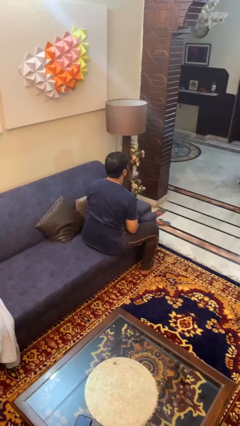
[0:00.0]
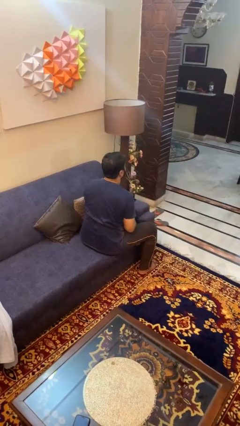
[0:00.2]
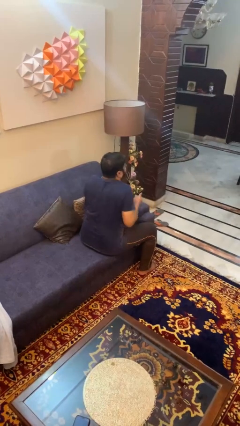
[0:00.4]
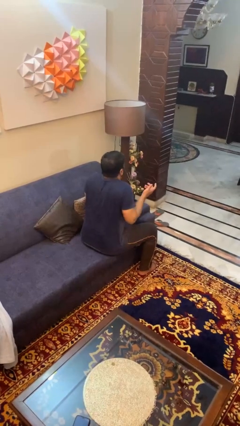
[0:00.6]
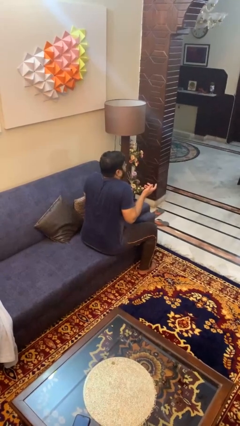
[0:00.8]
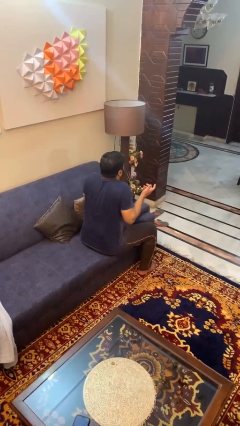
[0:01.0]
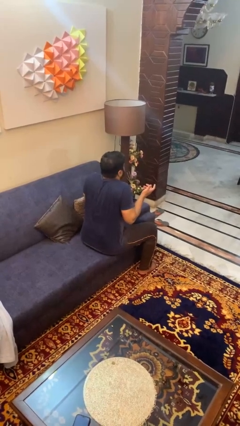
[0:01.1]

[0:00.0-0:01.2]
person shrugs

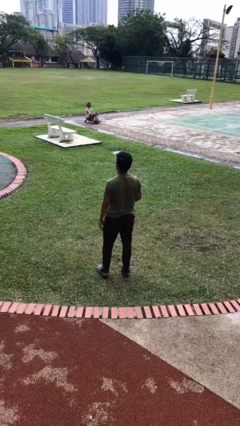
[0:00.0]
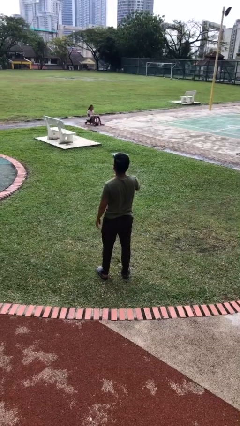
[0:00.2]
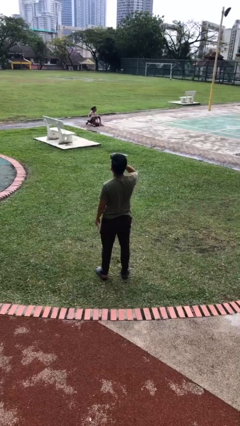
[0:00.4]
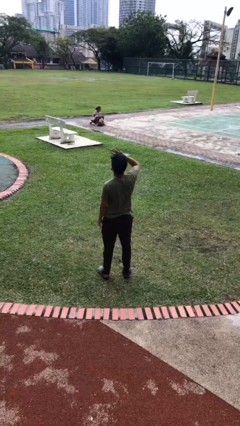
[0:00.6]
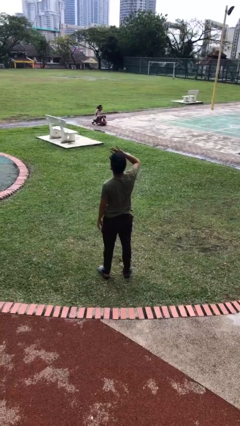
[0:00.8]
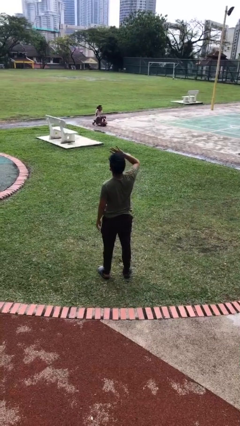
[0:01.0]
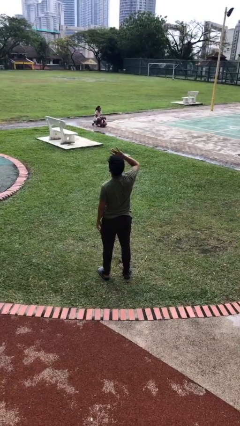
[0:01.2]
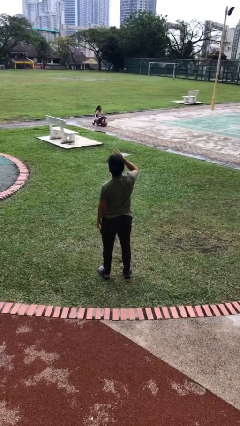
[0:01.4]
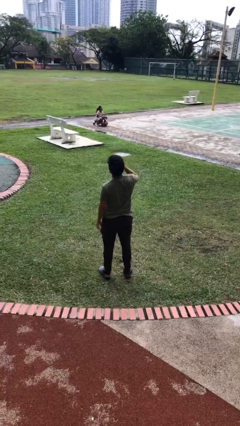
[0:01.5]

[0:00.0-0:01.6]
person shades eyes

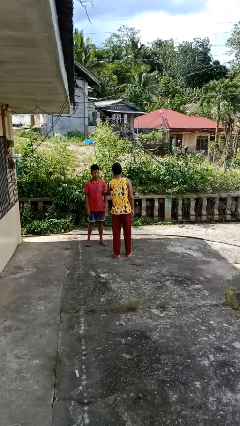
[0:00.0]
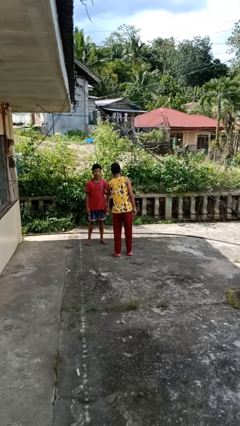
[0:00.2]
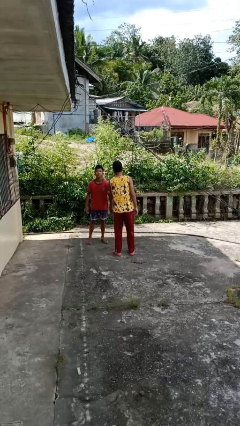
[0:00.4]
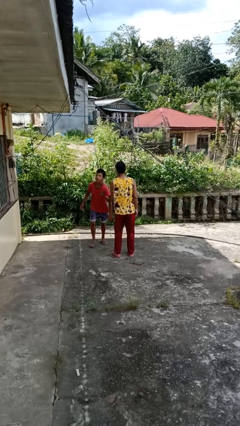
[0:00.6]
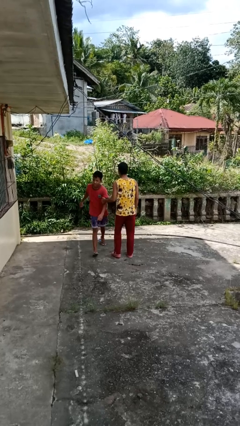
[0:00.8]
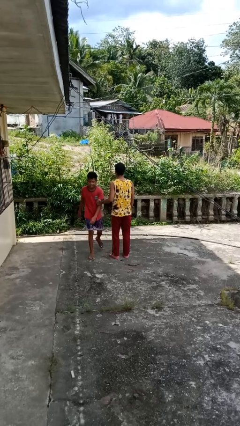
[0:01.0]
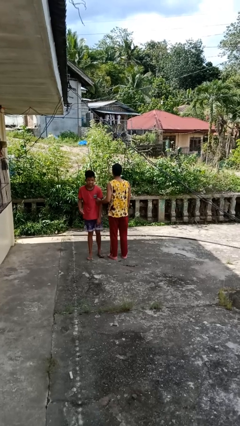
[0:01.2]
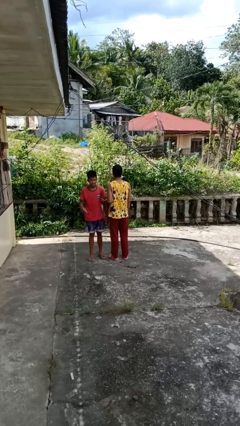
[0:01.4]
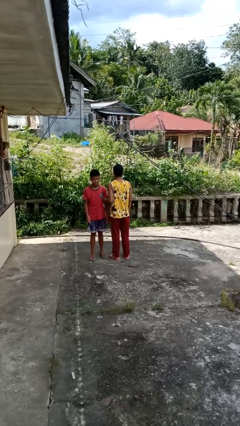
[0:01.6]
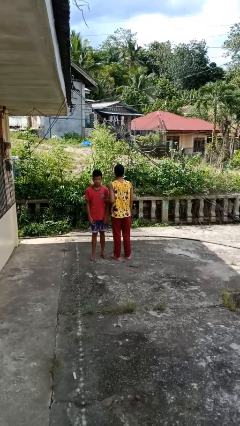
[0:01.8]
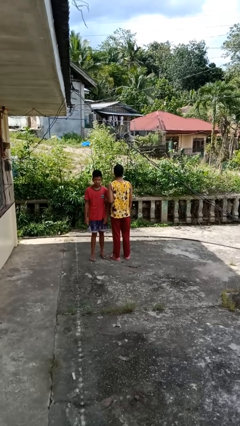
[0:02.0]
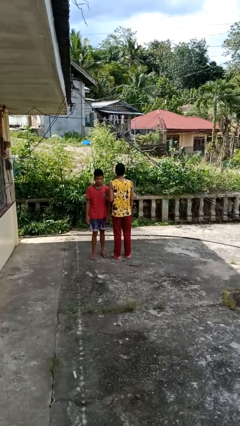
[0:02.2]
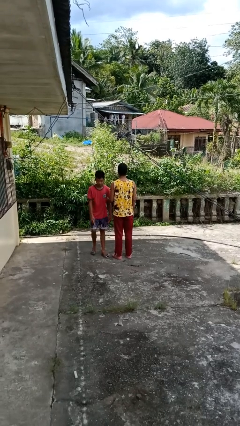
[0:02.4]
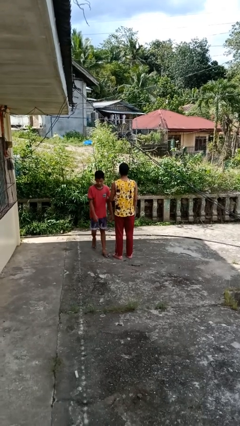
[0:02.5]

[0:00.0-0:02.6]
person grabs person by bicep

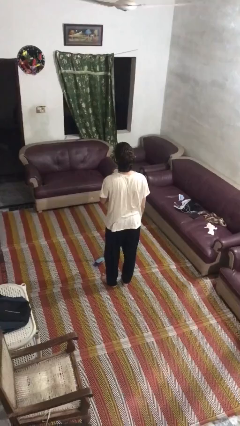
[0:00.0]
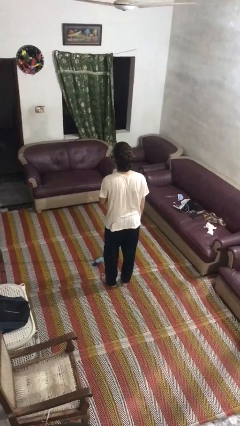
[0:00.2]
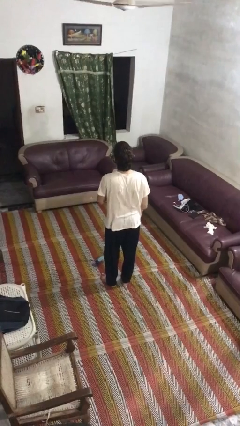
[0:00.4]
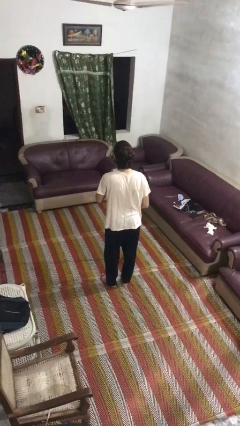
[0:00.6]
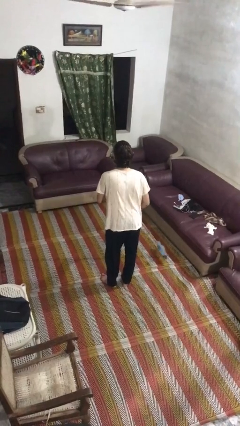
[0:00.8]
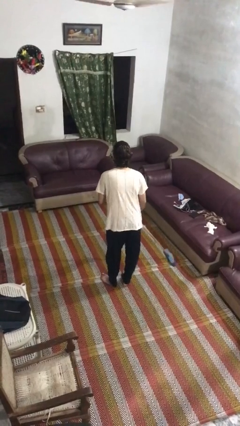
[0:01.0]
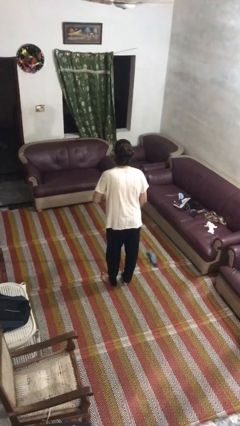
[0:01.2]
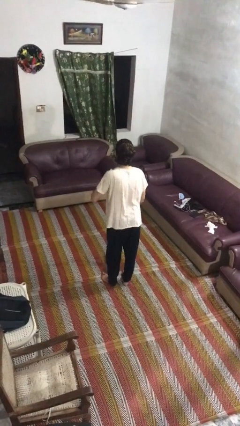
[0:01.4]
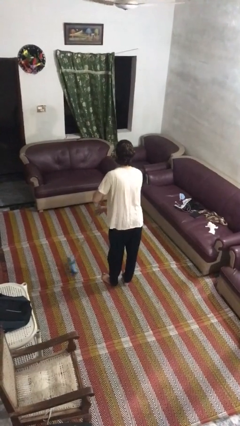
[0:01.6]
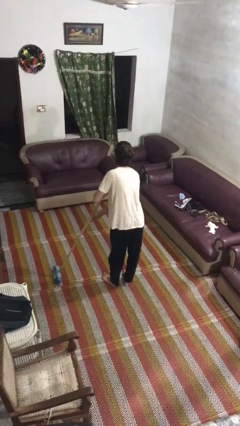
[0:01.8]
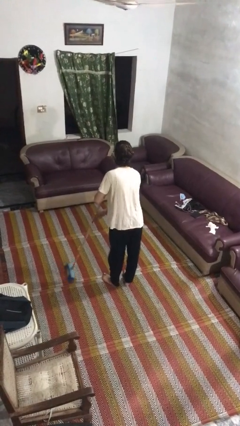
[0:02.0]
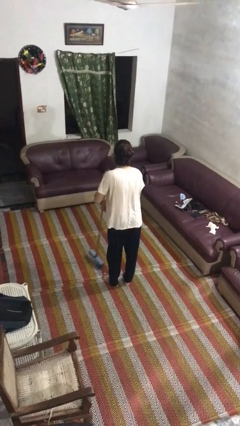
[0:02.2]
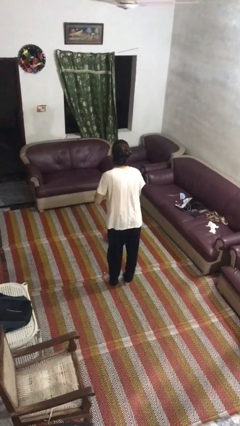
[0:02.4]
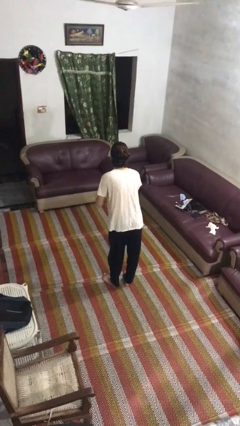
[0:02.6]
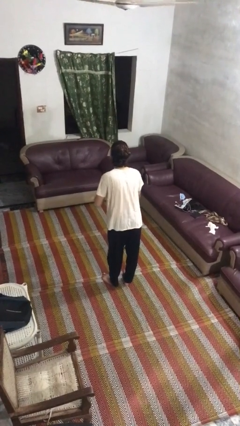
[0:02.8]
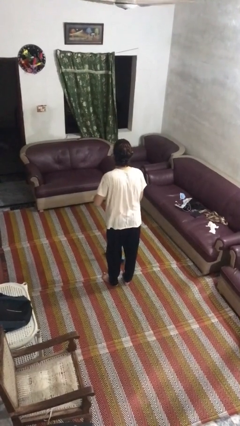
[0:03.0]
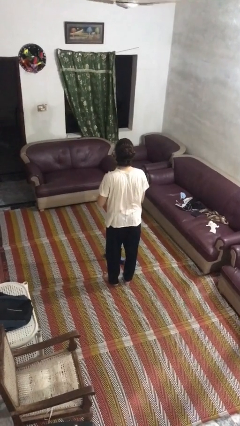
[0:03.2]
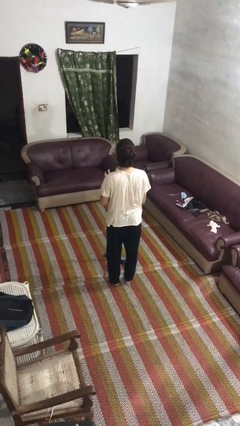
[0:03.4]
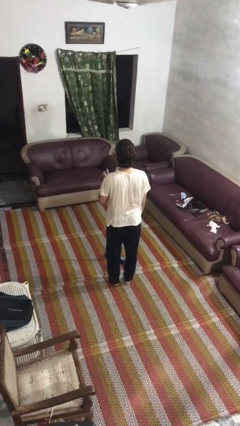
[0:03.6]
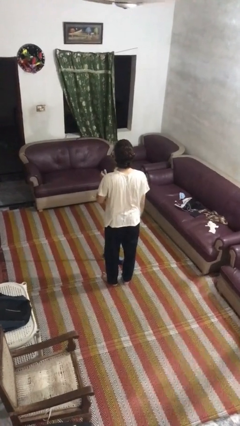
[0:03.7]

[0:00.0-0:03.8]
person sweeps floor

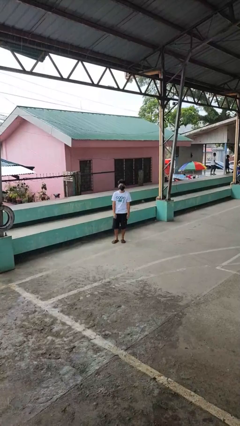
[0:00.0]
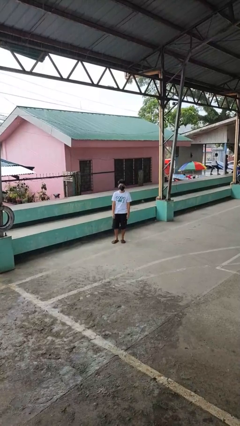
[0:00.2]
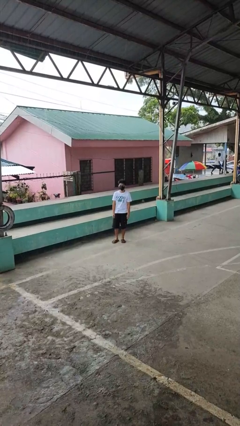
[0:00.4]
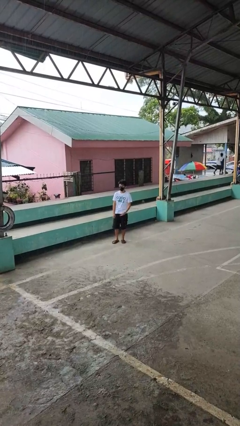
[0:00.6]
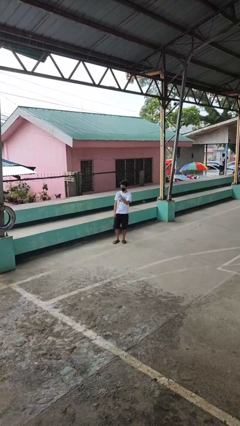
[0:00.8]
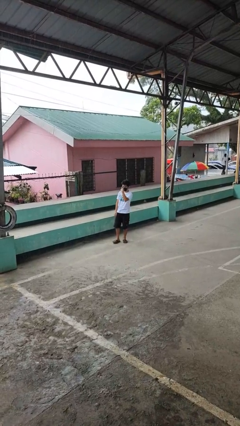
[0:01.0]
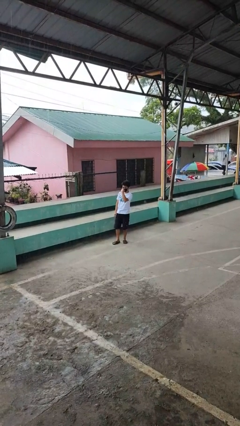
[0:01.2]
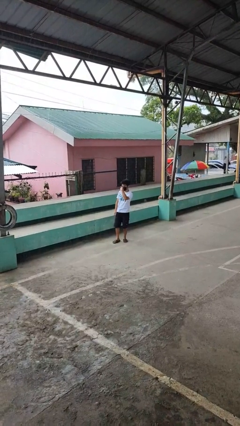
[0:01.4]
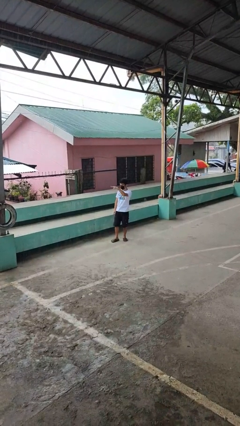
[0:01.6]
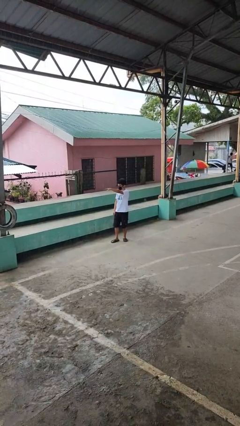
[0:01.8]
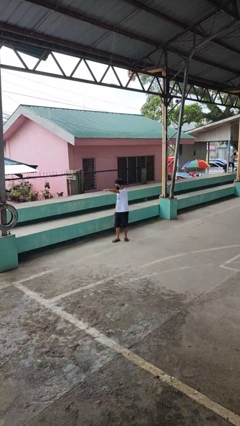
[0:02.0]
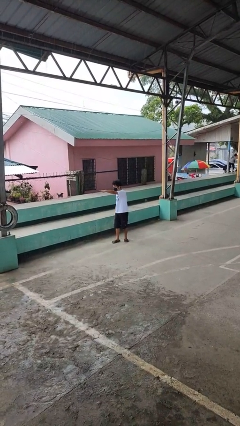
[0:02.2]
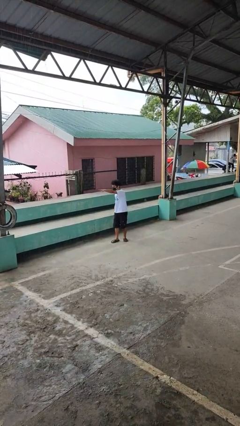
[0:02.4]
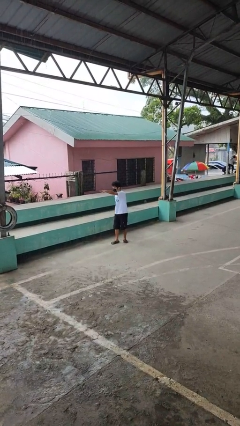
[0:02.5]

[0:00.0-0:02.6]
person gestures watch closely

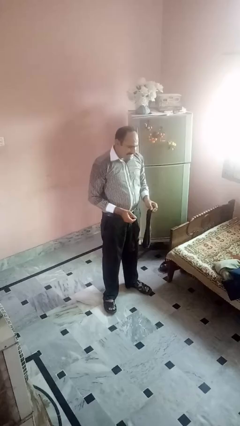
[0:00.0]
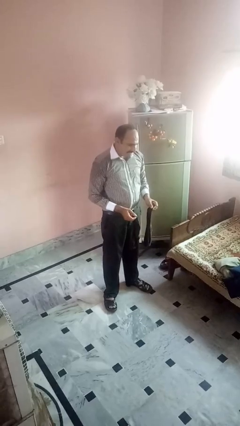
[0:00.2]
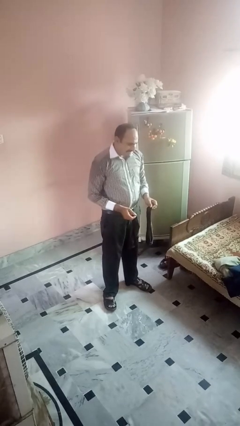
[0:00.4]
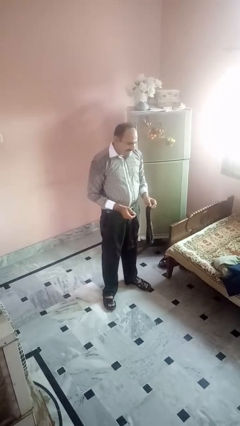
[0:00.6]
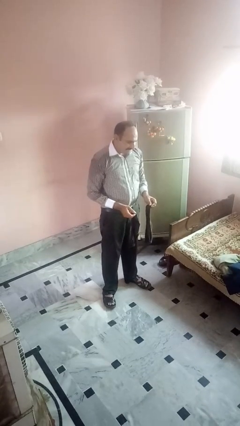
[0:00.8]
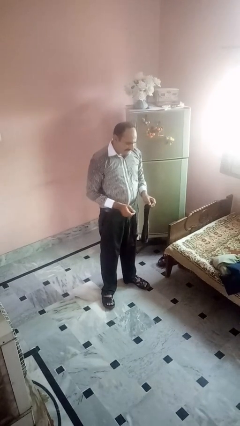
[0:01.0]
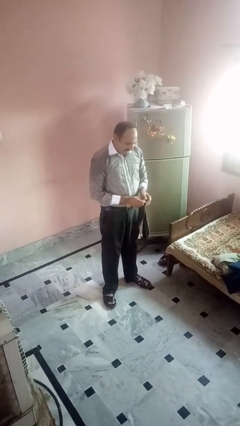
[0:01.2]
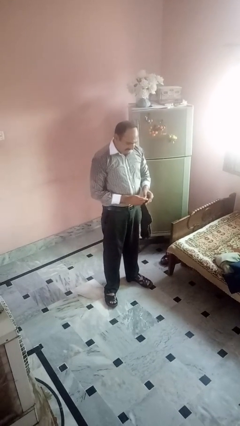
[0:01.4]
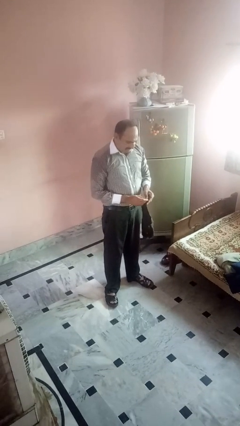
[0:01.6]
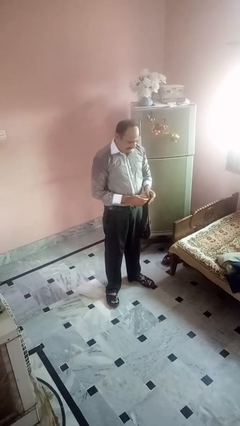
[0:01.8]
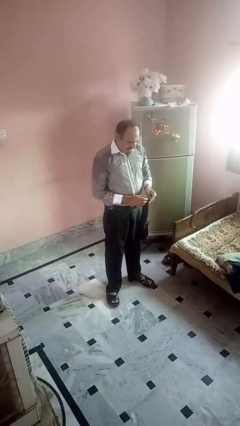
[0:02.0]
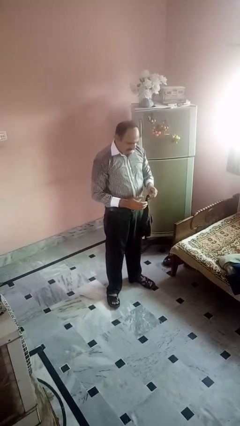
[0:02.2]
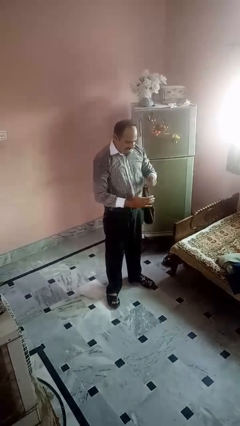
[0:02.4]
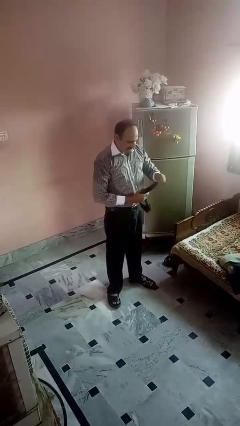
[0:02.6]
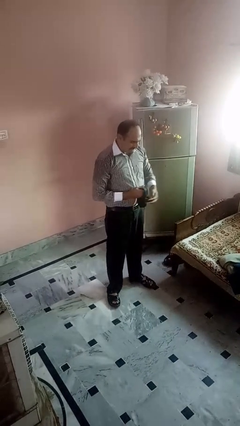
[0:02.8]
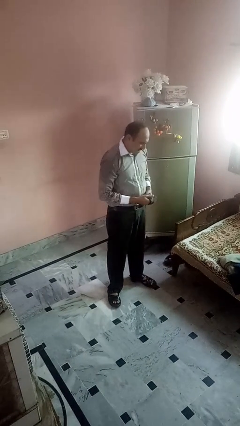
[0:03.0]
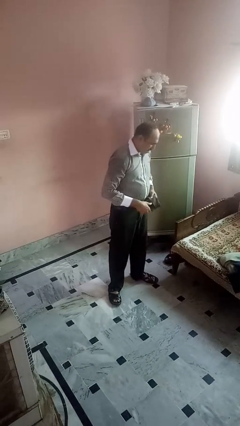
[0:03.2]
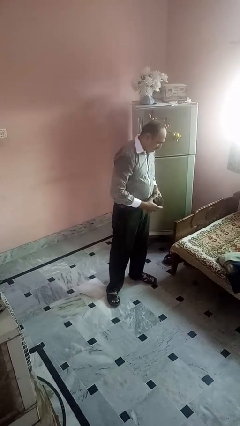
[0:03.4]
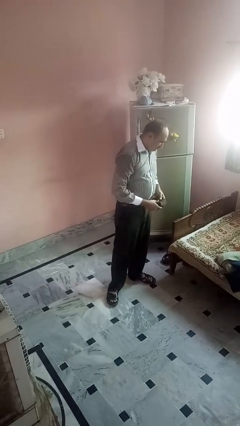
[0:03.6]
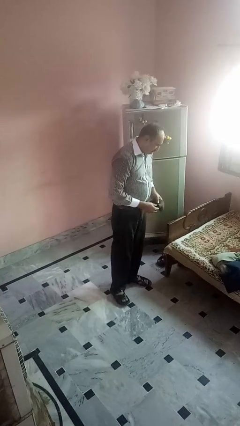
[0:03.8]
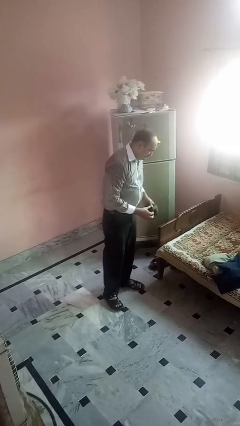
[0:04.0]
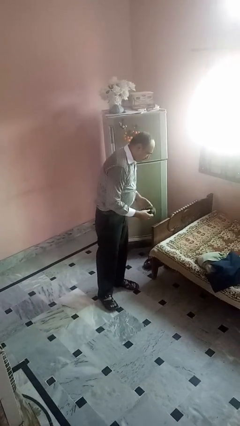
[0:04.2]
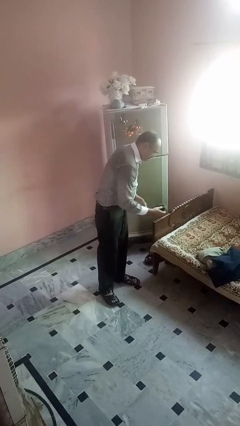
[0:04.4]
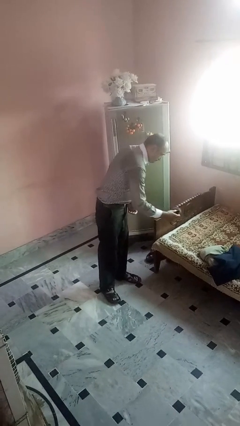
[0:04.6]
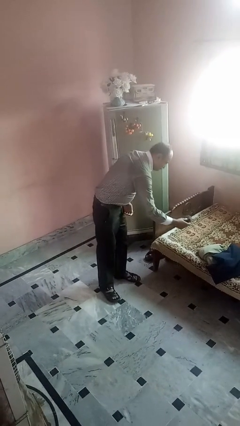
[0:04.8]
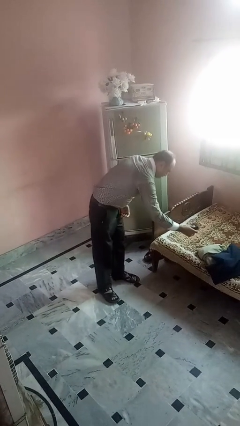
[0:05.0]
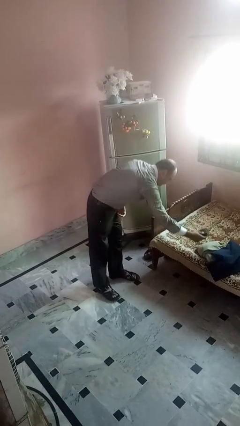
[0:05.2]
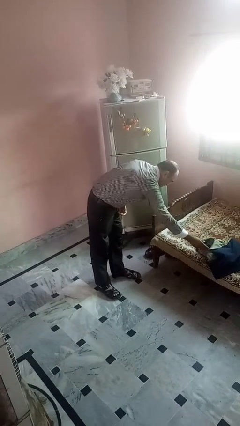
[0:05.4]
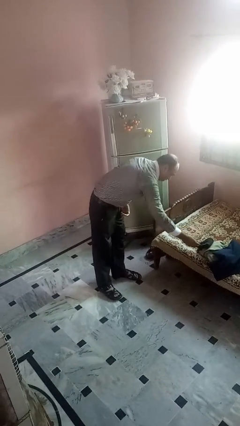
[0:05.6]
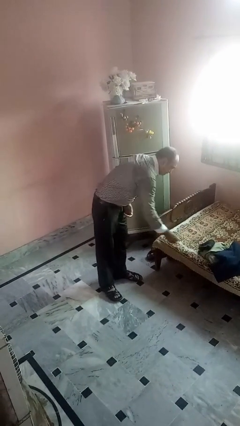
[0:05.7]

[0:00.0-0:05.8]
person folds socks
